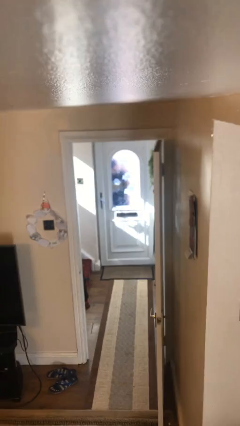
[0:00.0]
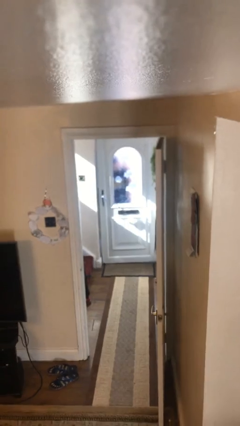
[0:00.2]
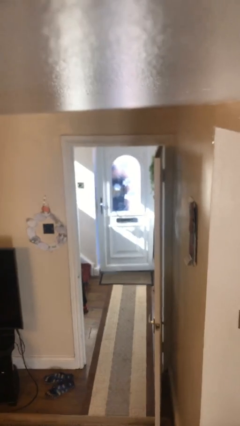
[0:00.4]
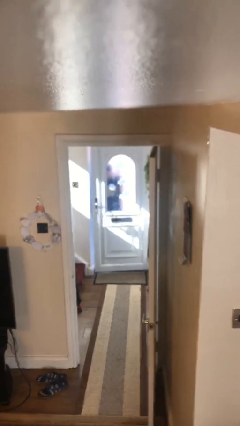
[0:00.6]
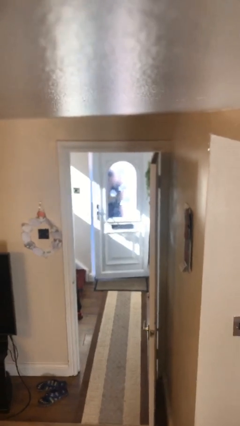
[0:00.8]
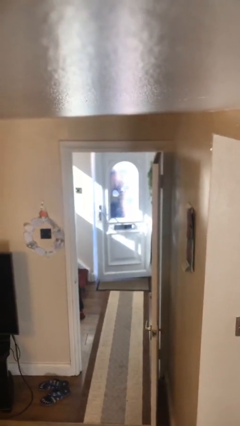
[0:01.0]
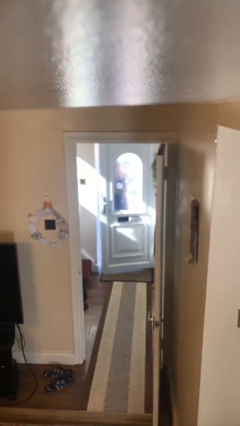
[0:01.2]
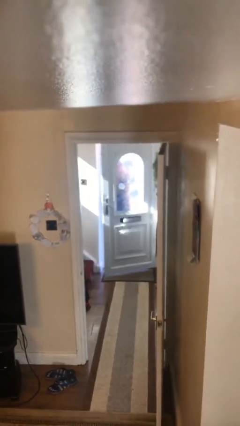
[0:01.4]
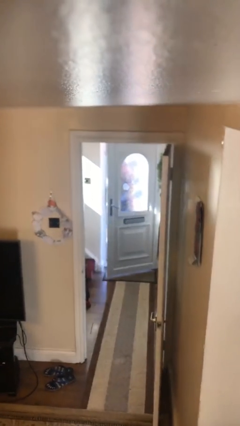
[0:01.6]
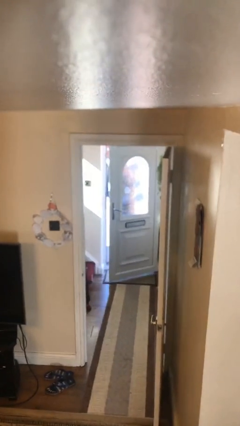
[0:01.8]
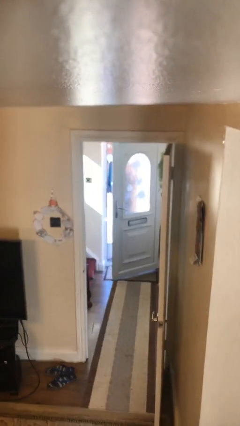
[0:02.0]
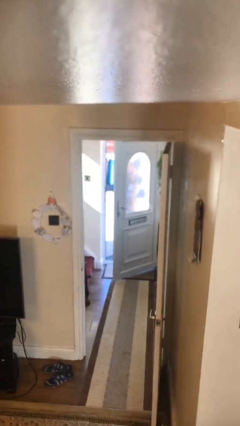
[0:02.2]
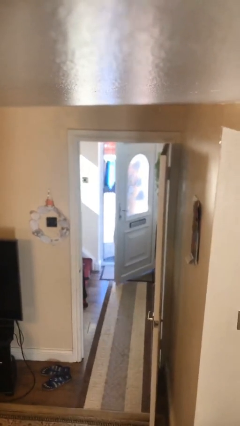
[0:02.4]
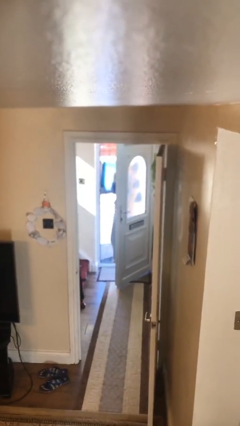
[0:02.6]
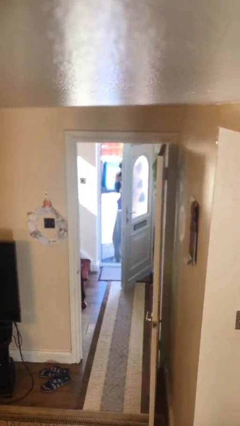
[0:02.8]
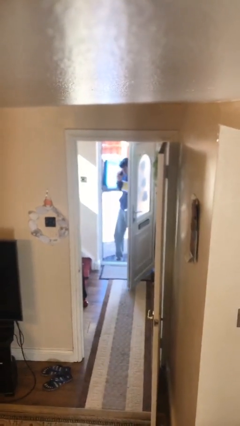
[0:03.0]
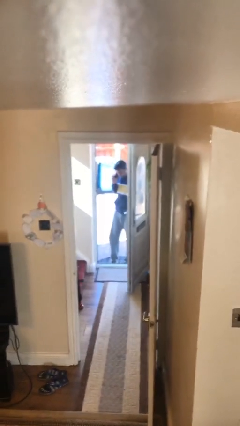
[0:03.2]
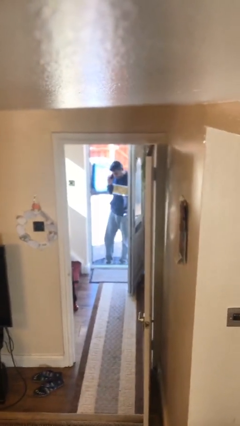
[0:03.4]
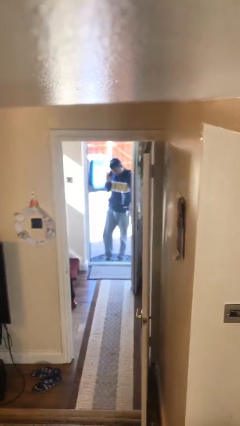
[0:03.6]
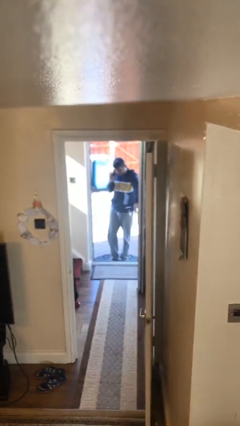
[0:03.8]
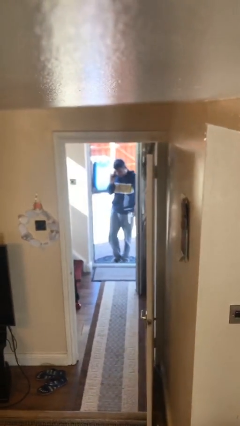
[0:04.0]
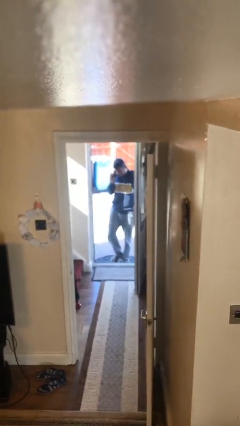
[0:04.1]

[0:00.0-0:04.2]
person opens facility door

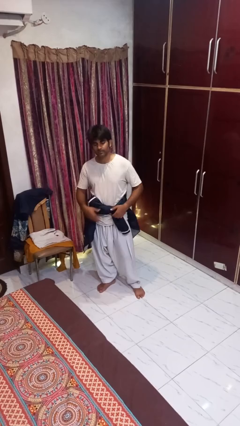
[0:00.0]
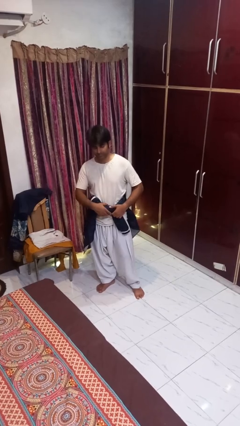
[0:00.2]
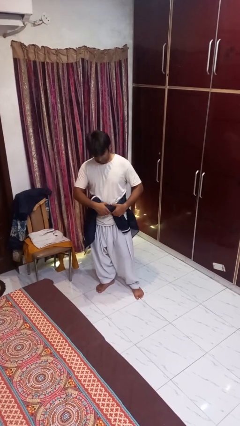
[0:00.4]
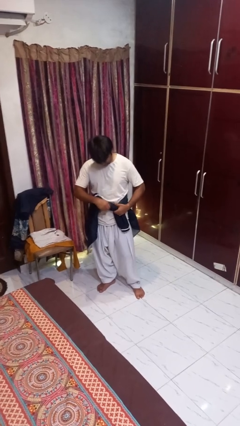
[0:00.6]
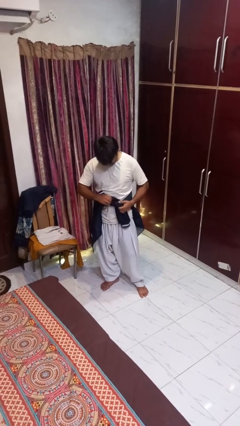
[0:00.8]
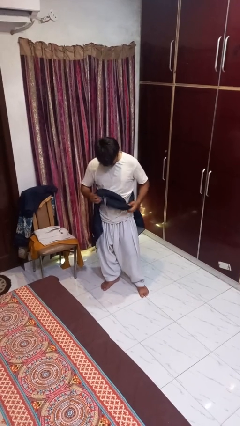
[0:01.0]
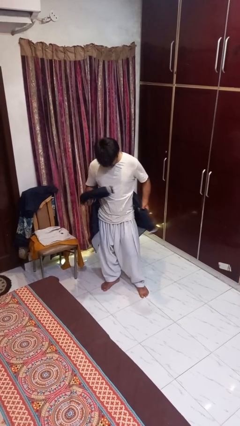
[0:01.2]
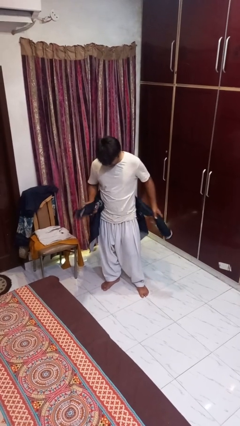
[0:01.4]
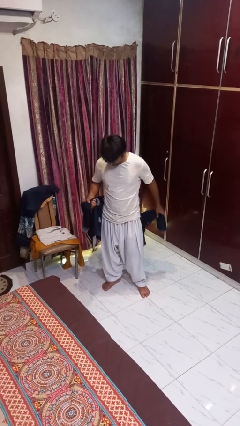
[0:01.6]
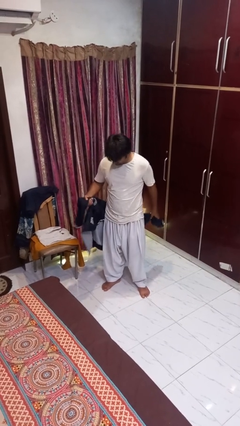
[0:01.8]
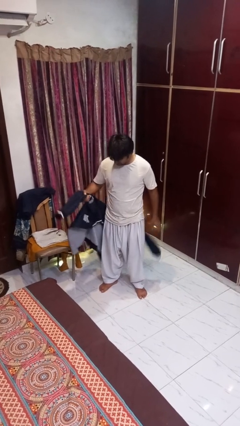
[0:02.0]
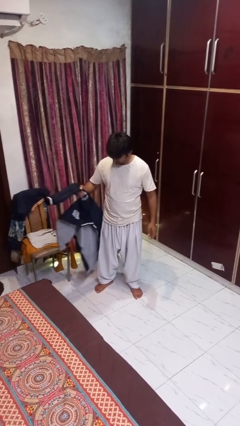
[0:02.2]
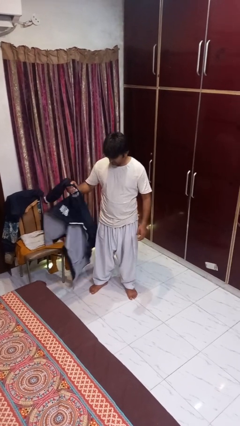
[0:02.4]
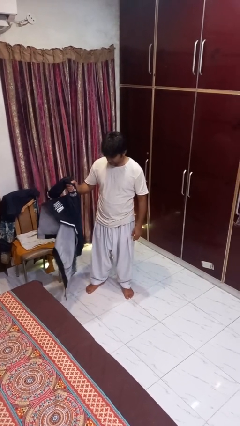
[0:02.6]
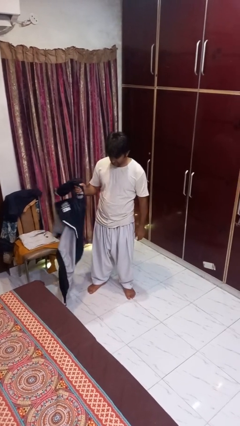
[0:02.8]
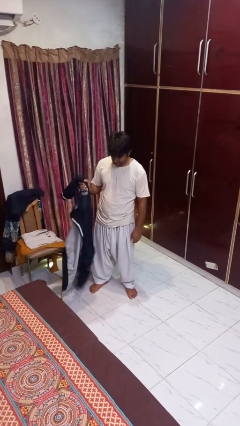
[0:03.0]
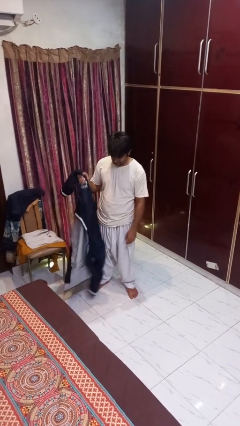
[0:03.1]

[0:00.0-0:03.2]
person unties jacket around waist

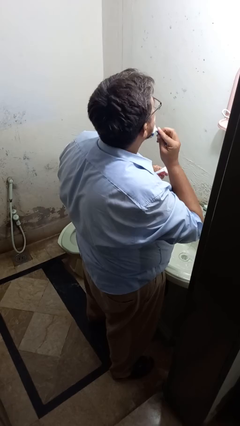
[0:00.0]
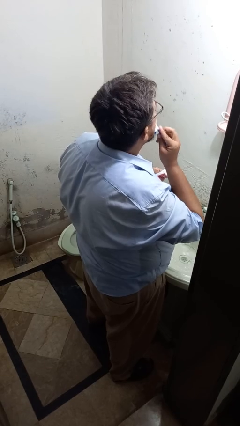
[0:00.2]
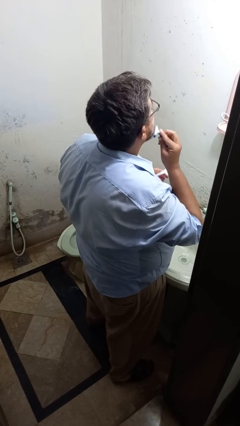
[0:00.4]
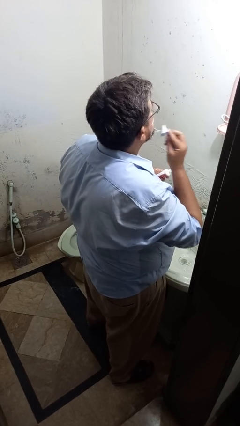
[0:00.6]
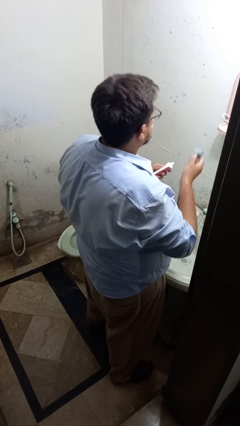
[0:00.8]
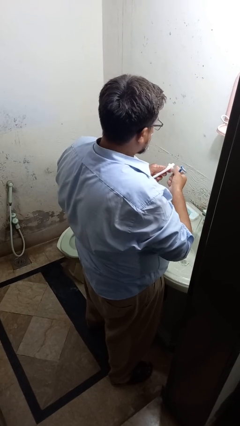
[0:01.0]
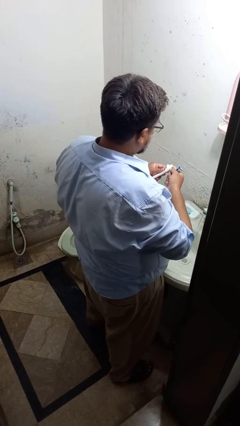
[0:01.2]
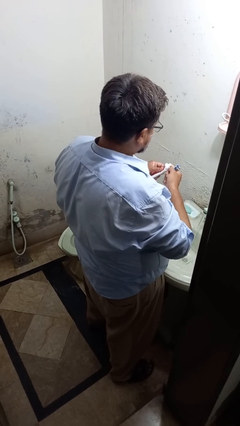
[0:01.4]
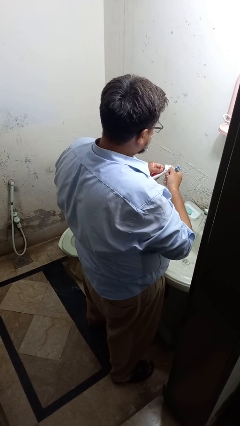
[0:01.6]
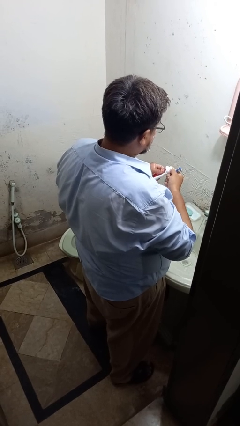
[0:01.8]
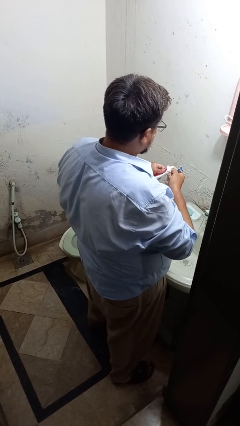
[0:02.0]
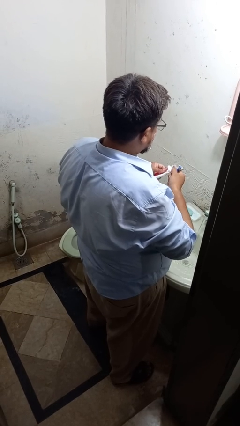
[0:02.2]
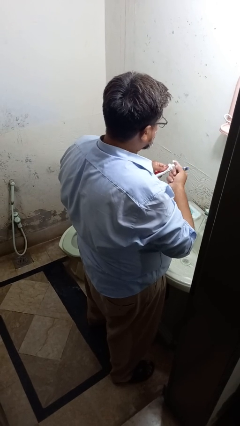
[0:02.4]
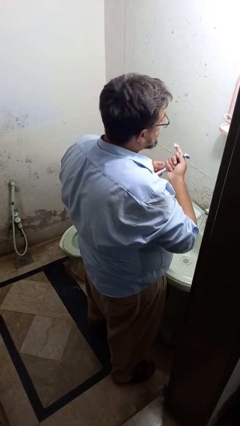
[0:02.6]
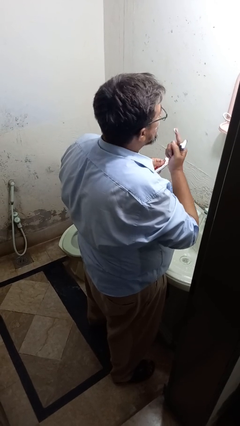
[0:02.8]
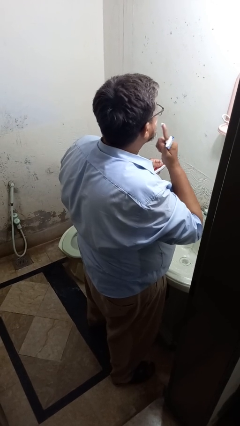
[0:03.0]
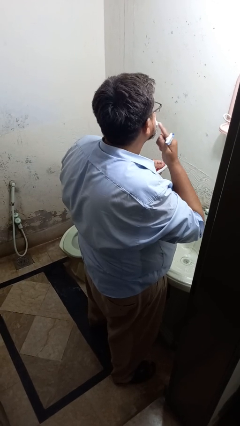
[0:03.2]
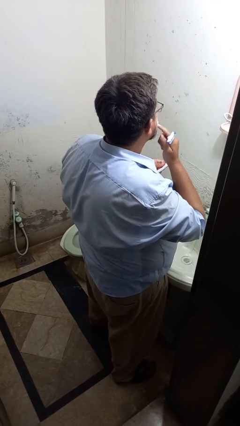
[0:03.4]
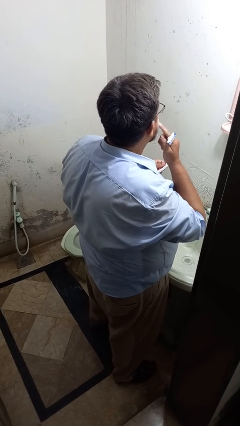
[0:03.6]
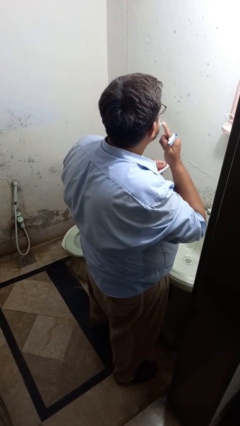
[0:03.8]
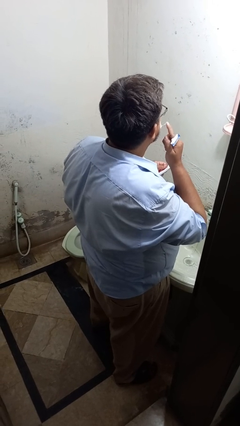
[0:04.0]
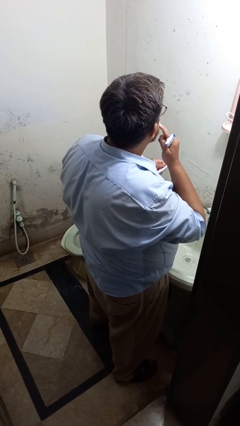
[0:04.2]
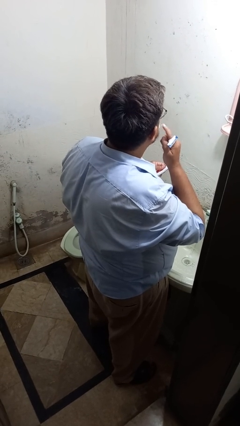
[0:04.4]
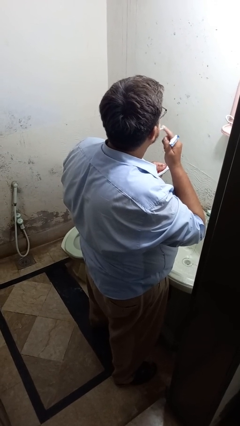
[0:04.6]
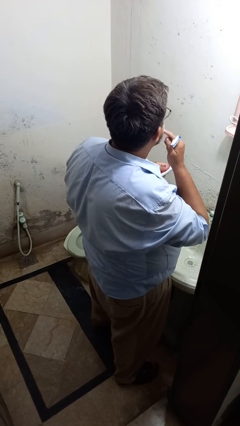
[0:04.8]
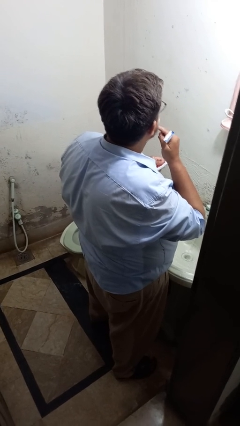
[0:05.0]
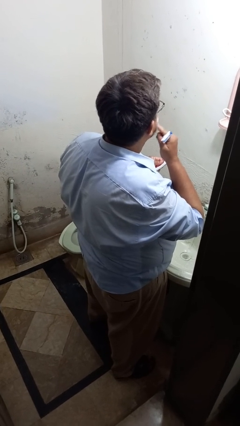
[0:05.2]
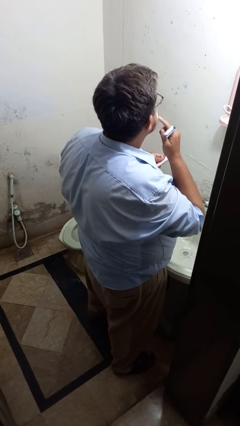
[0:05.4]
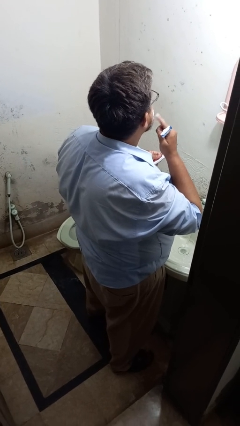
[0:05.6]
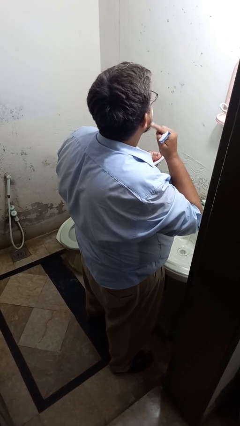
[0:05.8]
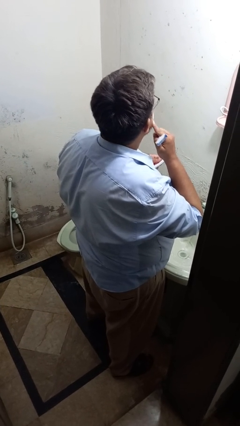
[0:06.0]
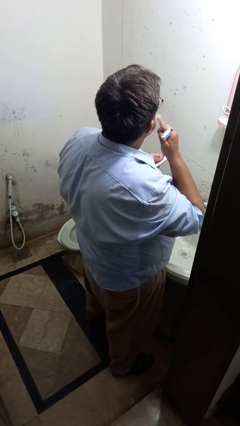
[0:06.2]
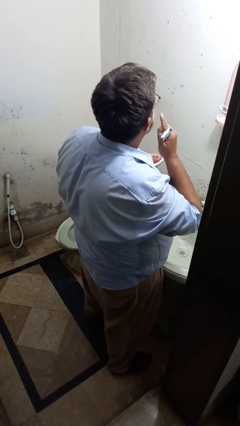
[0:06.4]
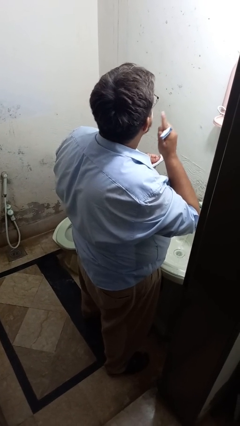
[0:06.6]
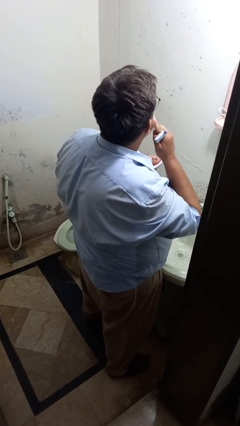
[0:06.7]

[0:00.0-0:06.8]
person applies shaving cream

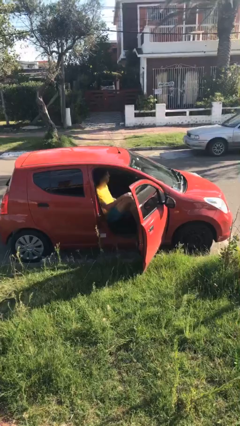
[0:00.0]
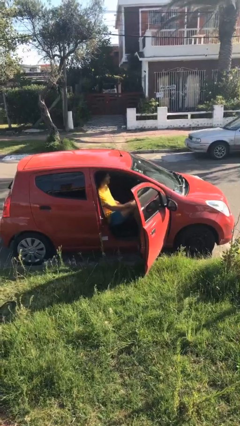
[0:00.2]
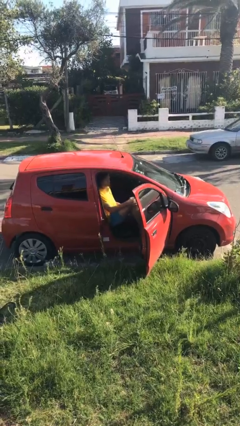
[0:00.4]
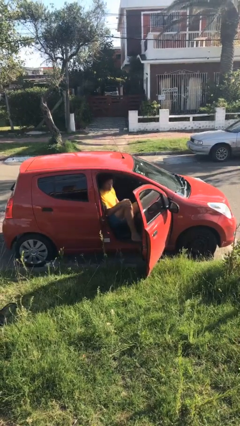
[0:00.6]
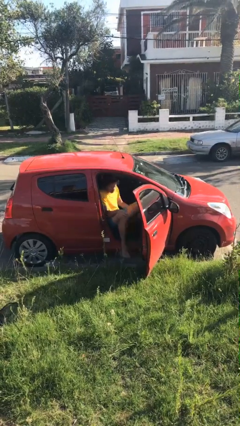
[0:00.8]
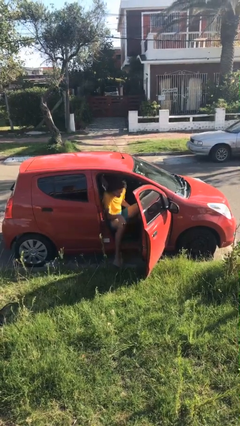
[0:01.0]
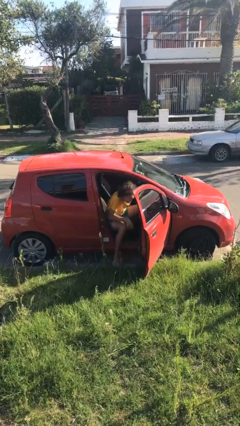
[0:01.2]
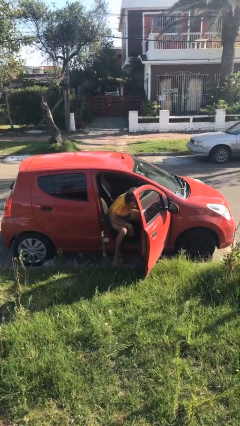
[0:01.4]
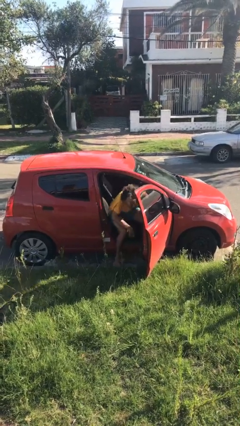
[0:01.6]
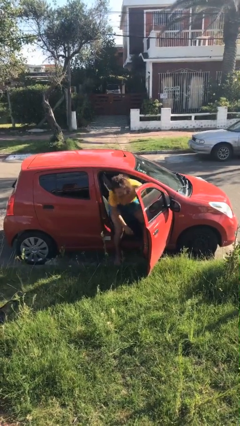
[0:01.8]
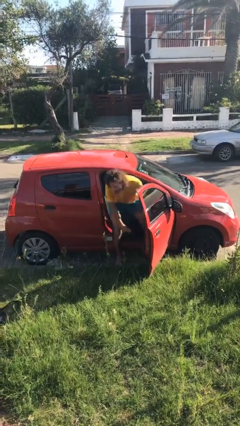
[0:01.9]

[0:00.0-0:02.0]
person exits car

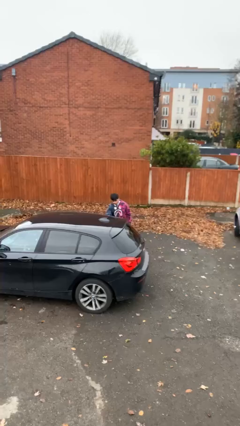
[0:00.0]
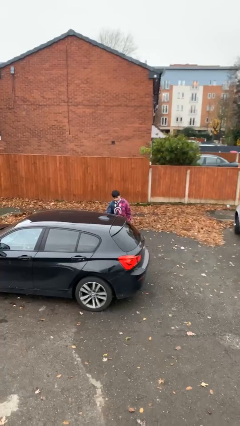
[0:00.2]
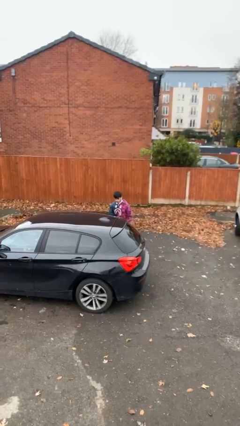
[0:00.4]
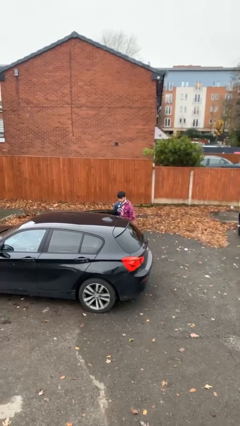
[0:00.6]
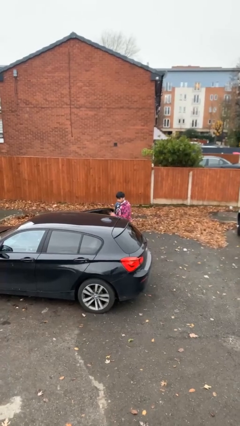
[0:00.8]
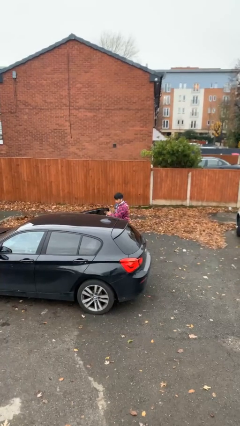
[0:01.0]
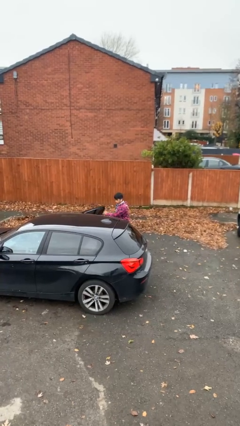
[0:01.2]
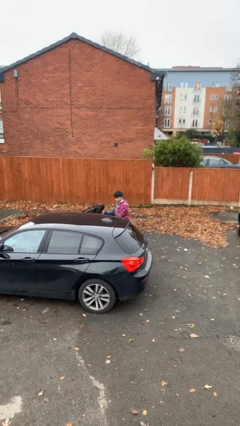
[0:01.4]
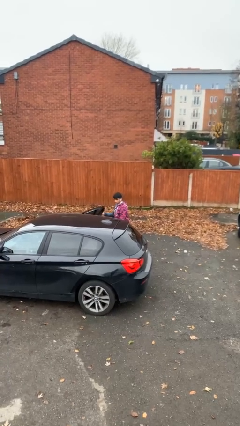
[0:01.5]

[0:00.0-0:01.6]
person opens car door
